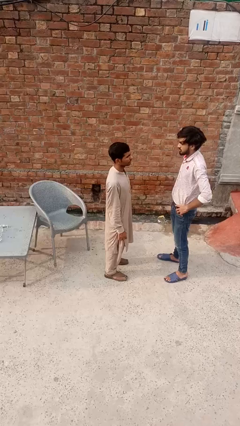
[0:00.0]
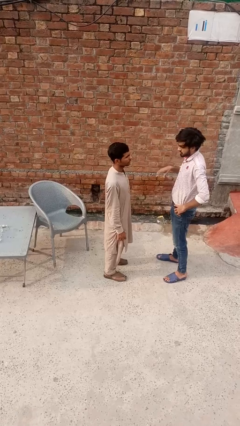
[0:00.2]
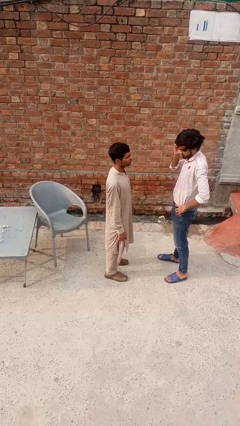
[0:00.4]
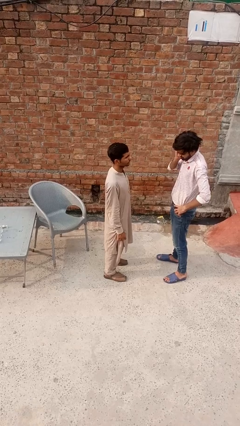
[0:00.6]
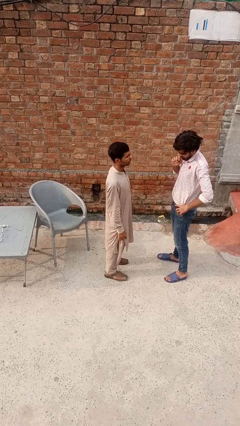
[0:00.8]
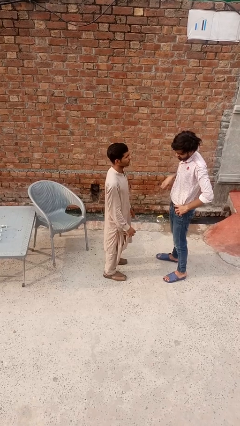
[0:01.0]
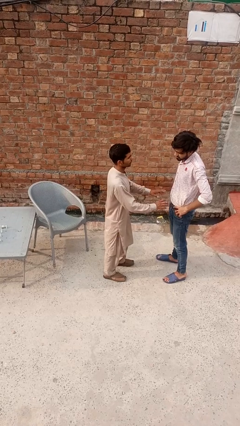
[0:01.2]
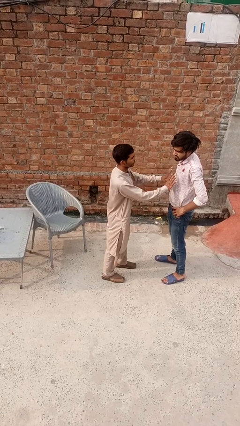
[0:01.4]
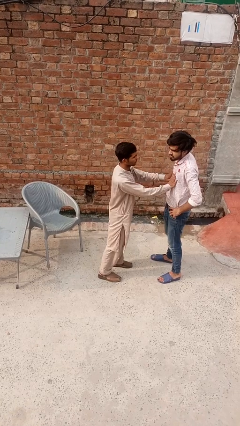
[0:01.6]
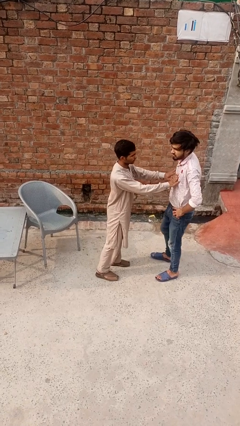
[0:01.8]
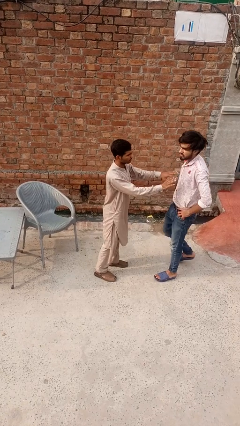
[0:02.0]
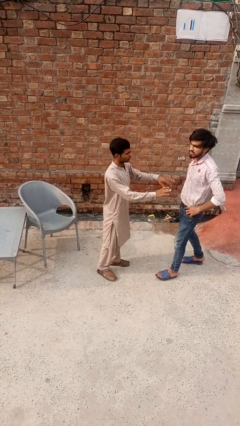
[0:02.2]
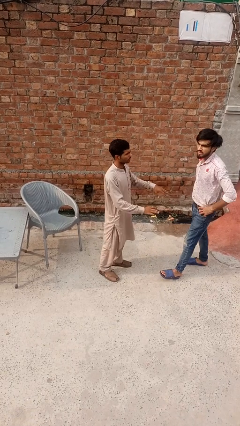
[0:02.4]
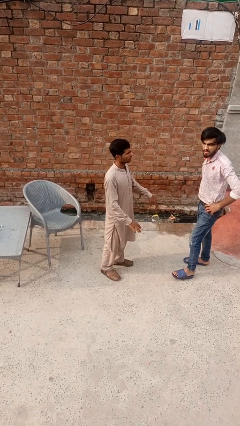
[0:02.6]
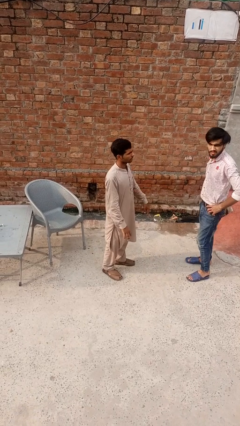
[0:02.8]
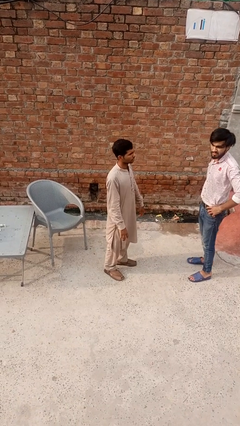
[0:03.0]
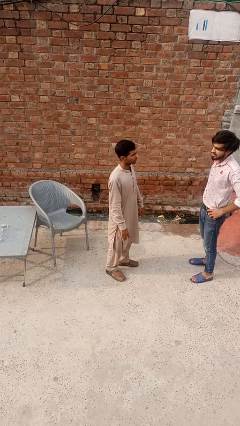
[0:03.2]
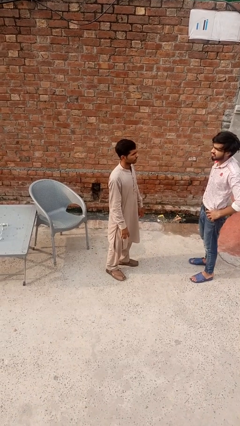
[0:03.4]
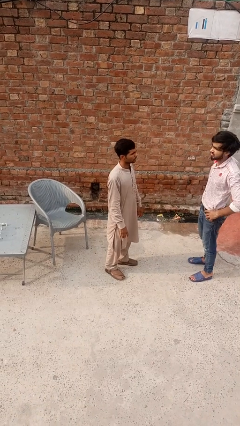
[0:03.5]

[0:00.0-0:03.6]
person grabs person by forearm

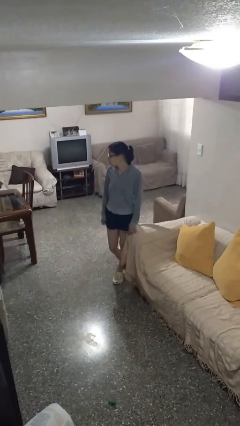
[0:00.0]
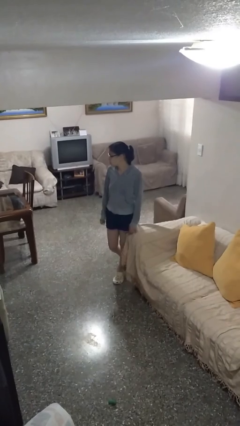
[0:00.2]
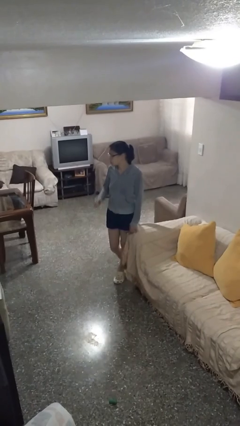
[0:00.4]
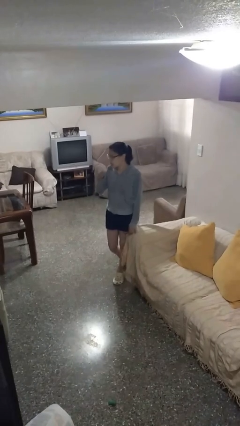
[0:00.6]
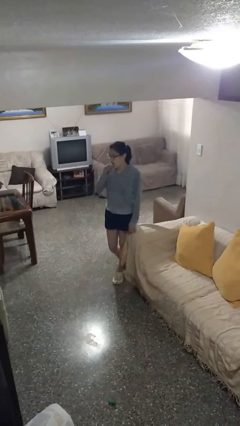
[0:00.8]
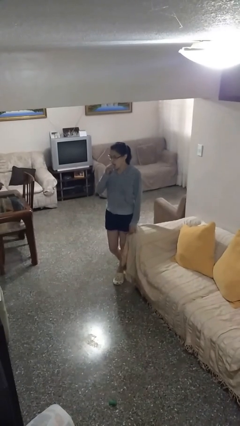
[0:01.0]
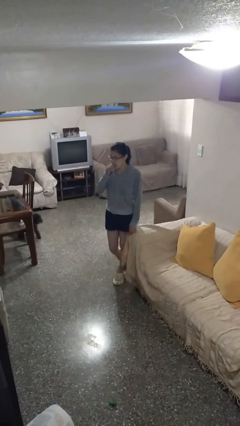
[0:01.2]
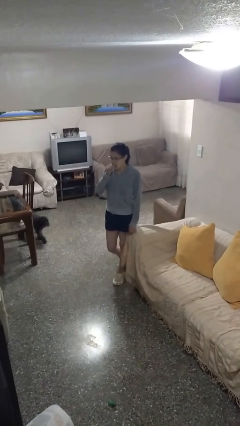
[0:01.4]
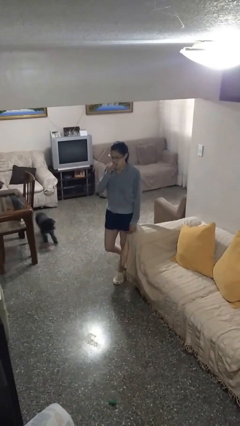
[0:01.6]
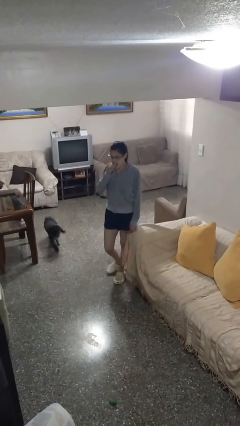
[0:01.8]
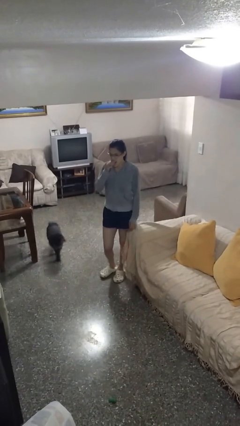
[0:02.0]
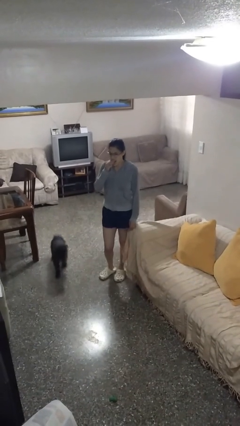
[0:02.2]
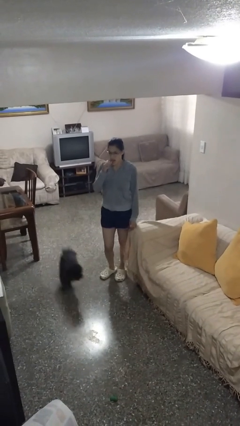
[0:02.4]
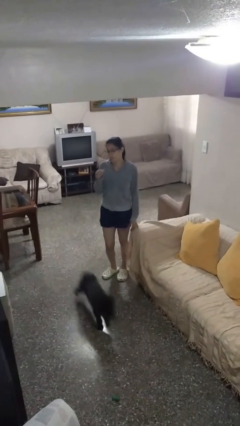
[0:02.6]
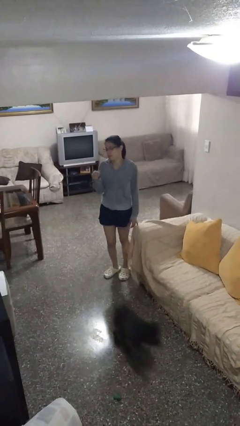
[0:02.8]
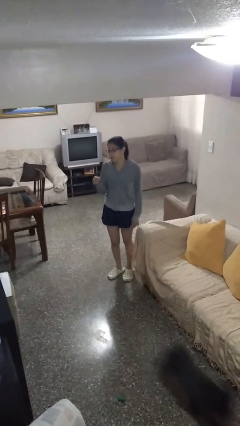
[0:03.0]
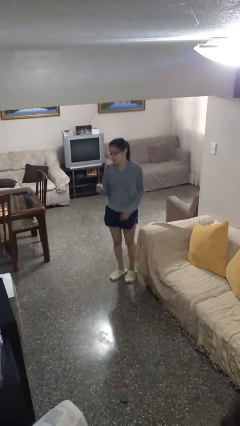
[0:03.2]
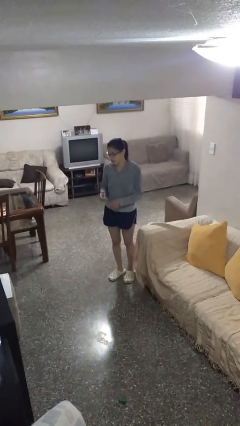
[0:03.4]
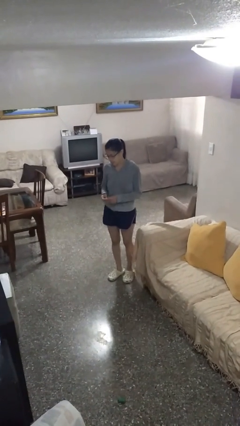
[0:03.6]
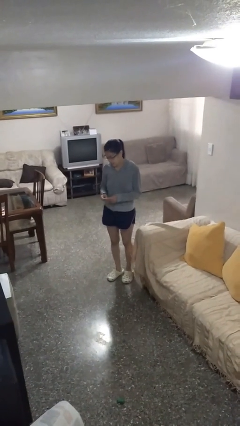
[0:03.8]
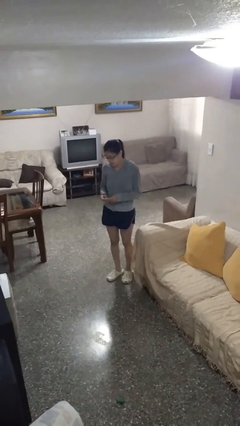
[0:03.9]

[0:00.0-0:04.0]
person flosses

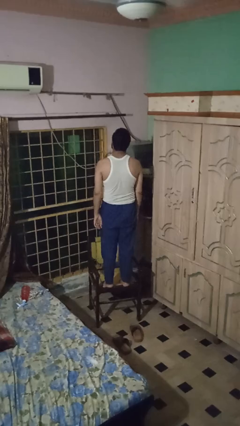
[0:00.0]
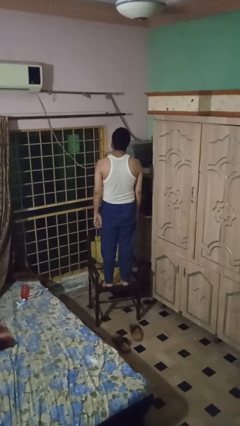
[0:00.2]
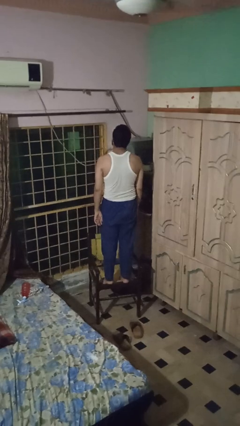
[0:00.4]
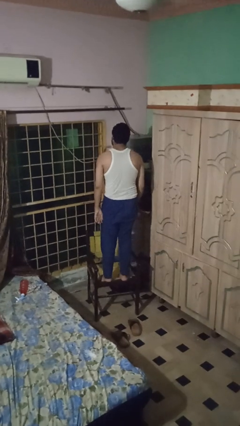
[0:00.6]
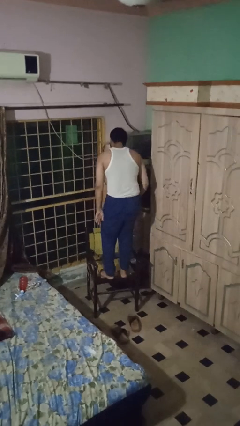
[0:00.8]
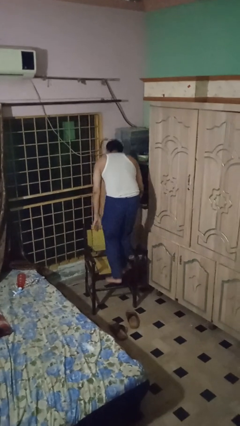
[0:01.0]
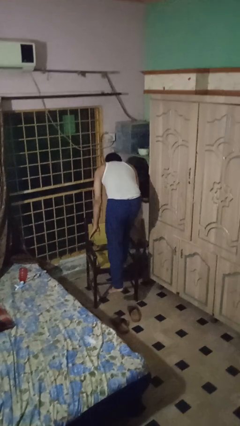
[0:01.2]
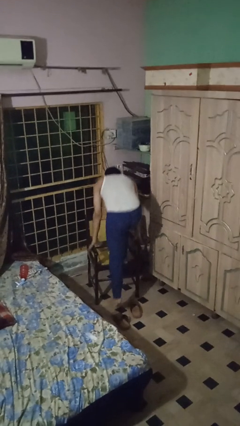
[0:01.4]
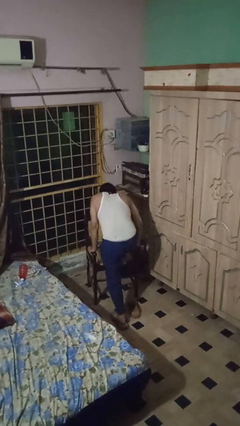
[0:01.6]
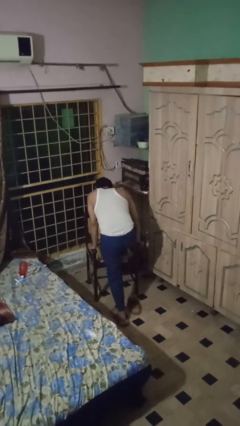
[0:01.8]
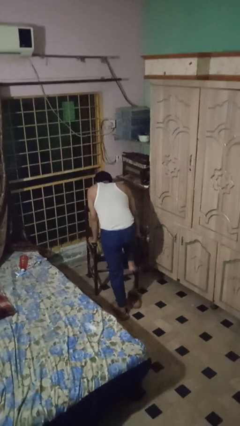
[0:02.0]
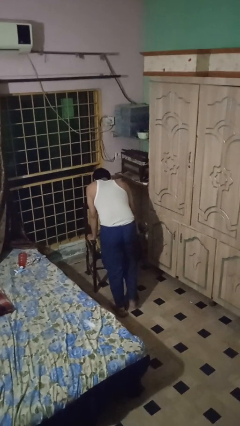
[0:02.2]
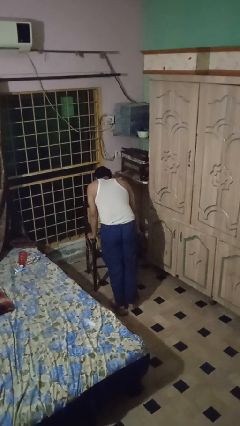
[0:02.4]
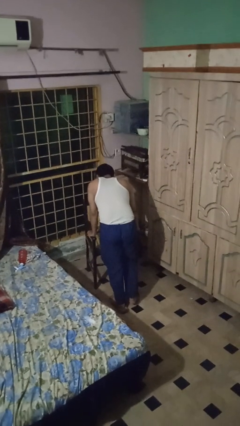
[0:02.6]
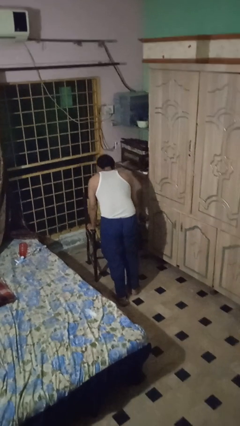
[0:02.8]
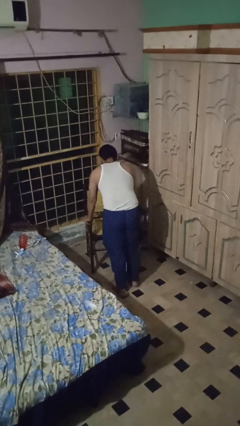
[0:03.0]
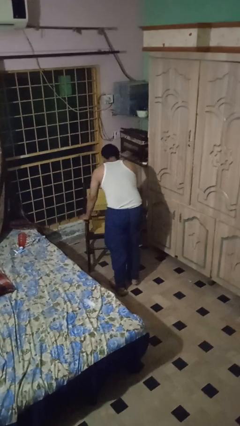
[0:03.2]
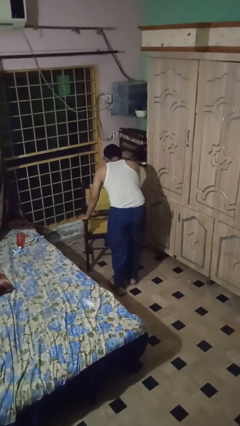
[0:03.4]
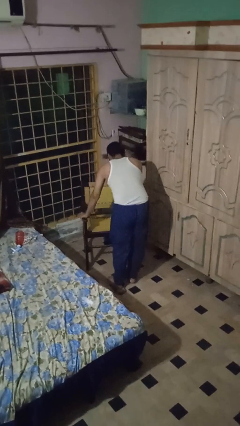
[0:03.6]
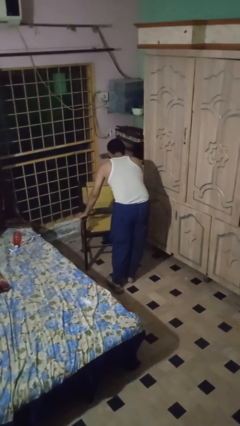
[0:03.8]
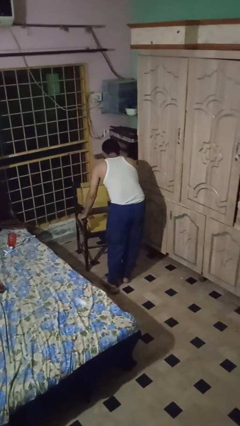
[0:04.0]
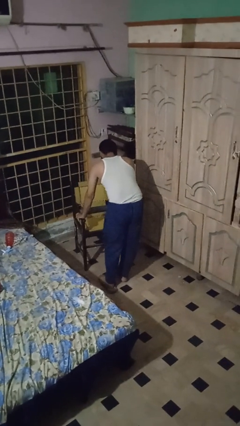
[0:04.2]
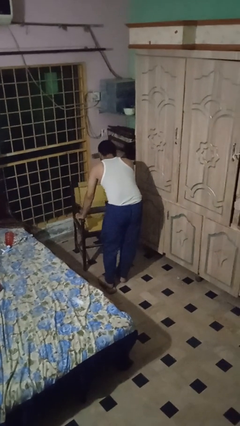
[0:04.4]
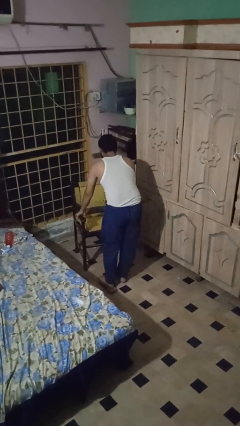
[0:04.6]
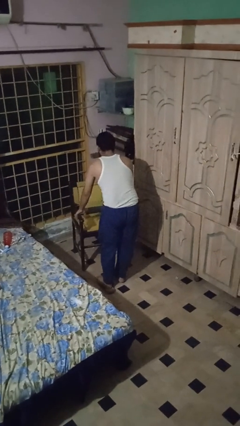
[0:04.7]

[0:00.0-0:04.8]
person climbs off chair

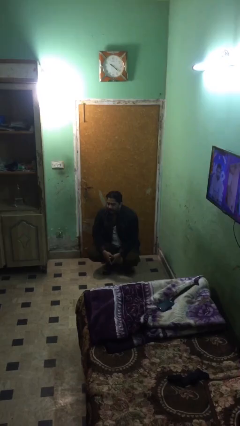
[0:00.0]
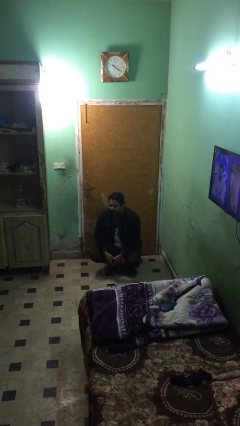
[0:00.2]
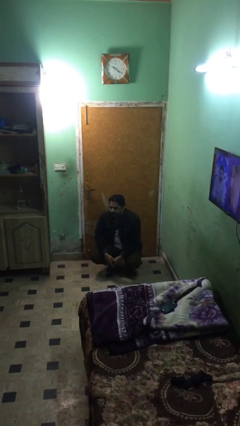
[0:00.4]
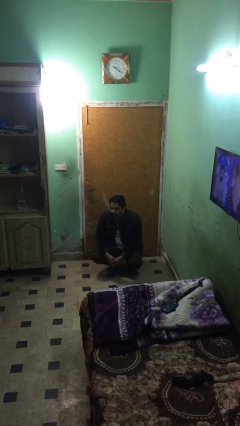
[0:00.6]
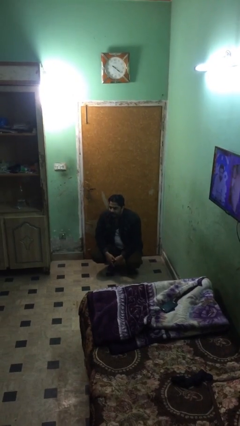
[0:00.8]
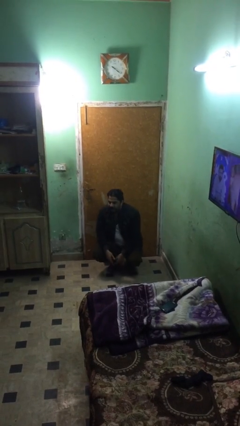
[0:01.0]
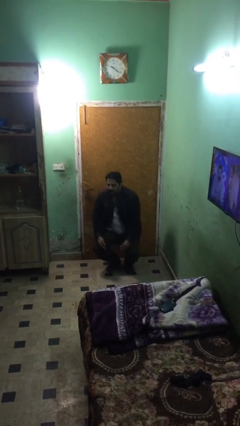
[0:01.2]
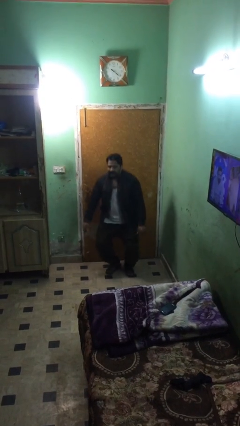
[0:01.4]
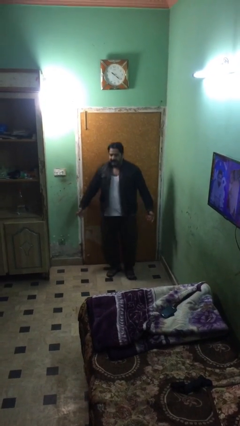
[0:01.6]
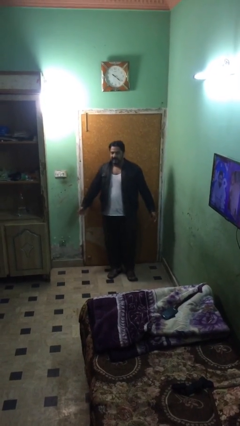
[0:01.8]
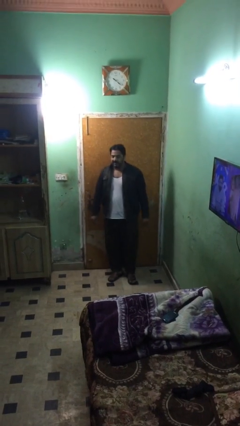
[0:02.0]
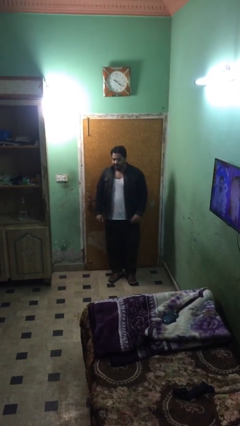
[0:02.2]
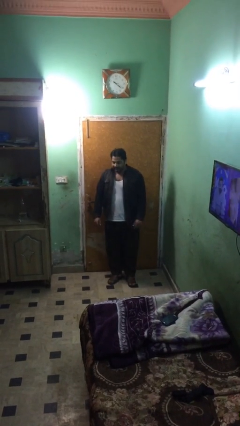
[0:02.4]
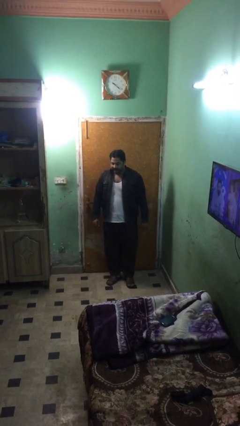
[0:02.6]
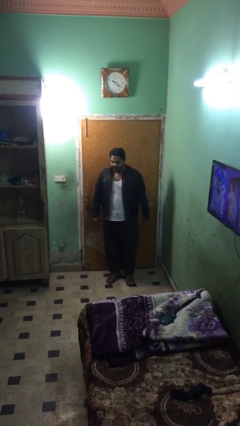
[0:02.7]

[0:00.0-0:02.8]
person stands up

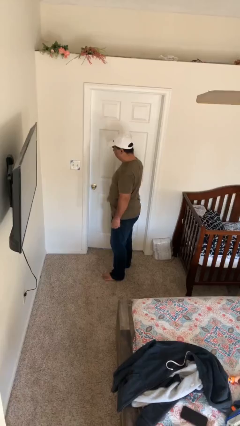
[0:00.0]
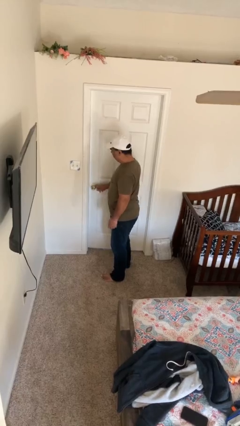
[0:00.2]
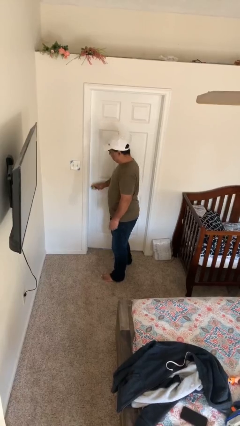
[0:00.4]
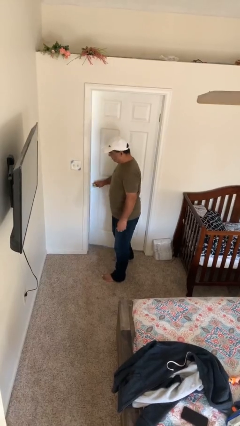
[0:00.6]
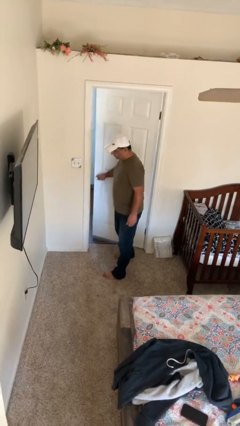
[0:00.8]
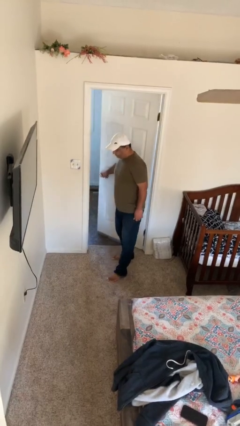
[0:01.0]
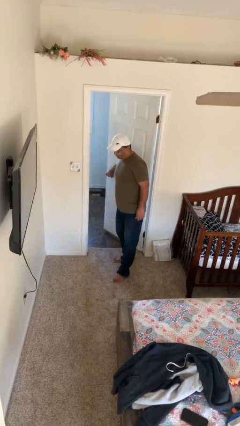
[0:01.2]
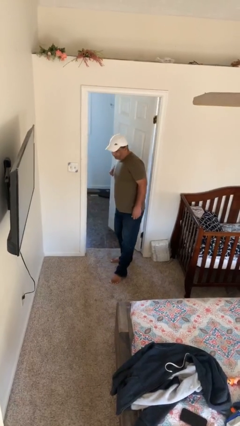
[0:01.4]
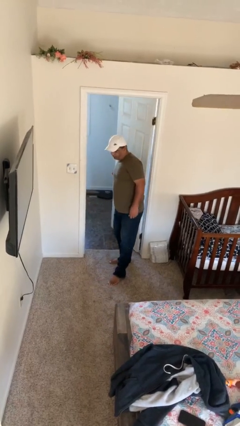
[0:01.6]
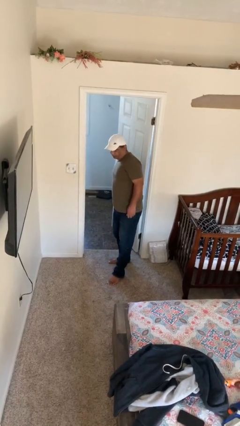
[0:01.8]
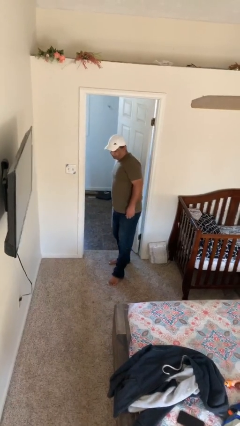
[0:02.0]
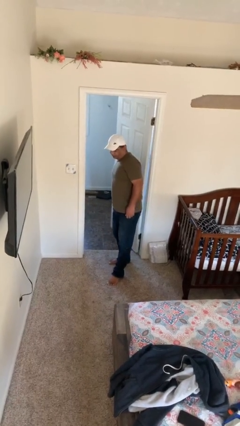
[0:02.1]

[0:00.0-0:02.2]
person opens facility door
